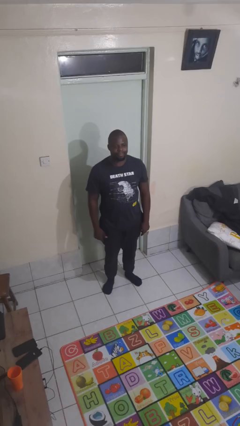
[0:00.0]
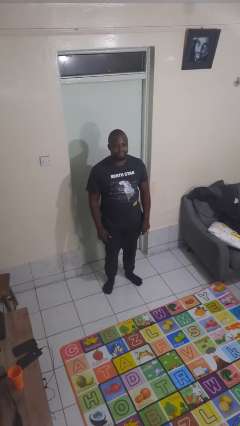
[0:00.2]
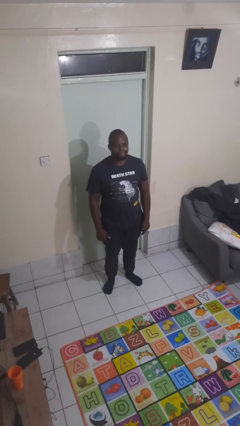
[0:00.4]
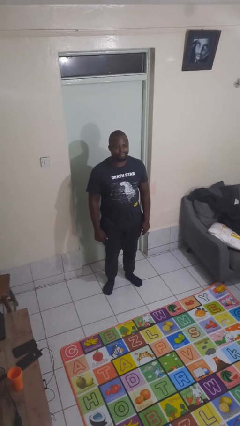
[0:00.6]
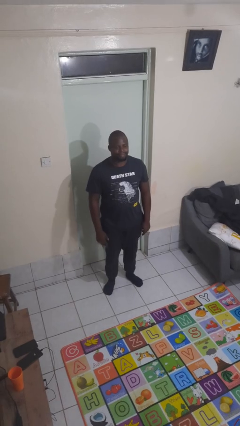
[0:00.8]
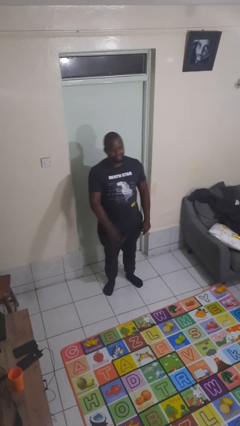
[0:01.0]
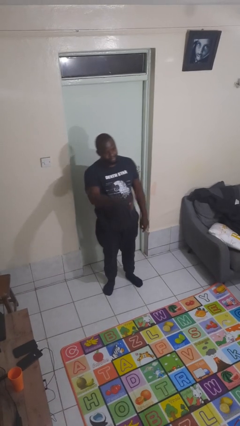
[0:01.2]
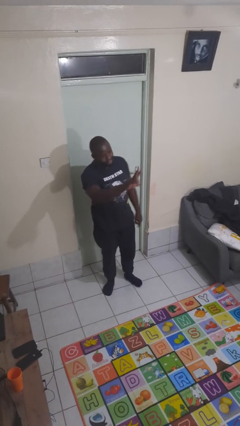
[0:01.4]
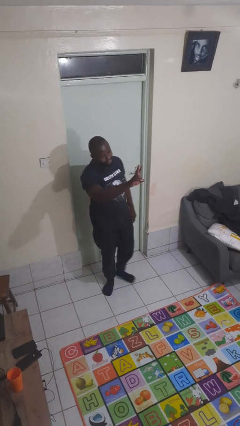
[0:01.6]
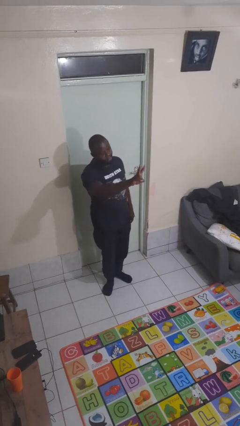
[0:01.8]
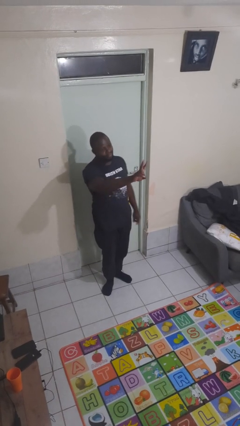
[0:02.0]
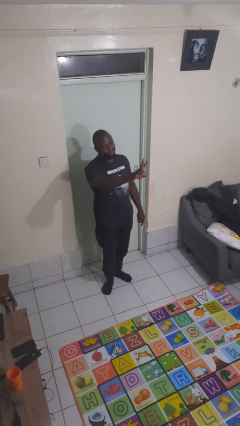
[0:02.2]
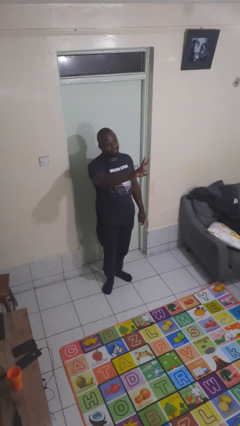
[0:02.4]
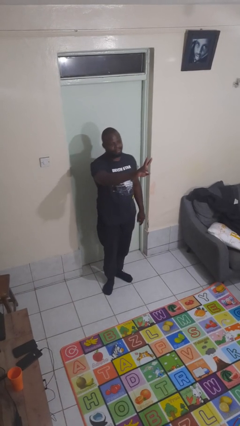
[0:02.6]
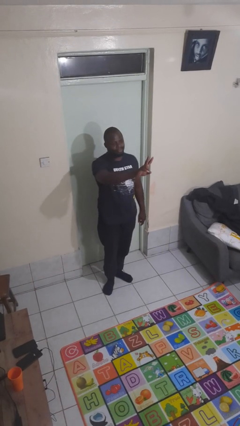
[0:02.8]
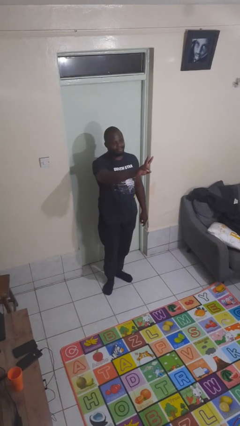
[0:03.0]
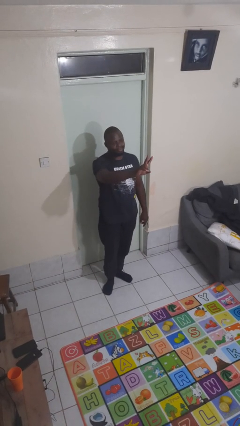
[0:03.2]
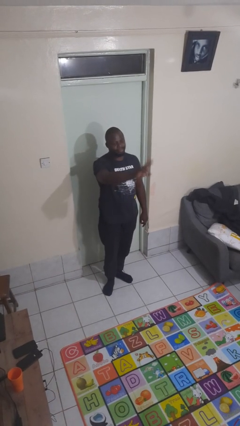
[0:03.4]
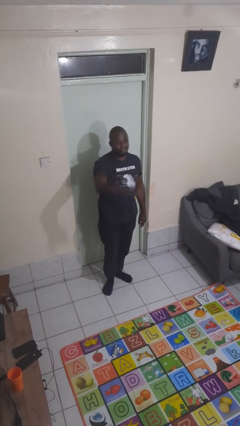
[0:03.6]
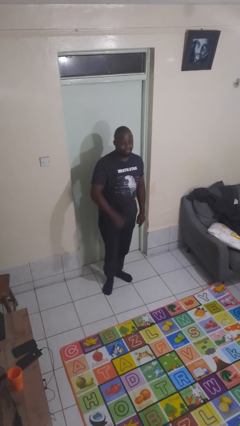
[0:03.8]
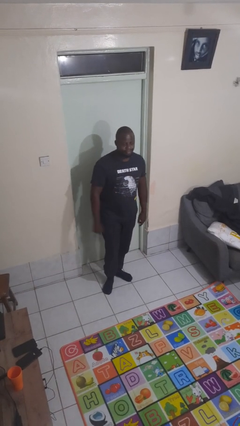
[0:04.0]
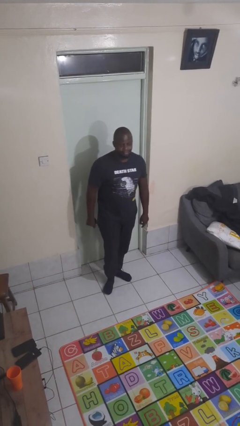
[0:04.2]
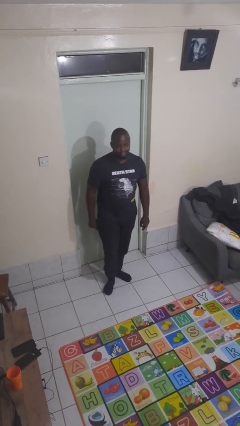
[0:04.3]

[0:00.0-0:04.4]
person gestures peace

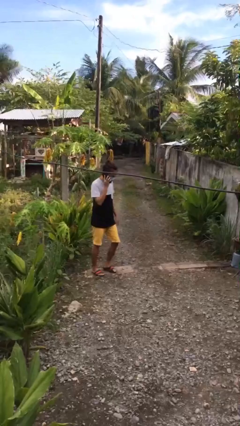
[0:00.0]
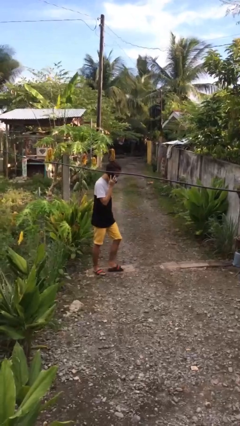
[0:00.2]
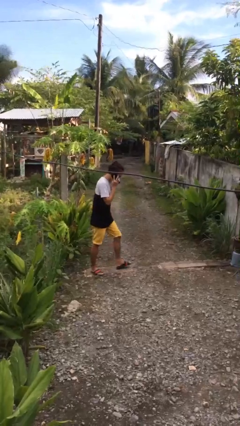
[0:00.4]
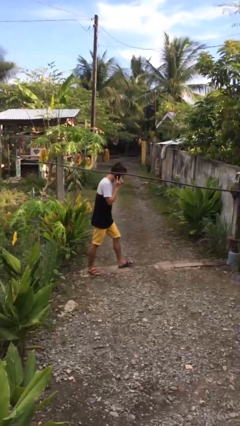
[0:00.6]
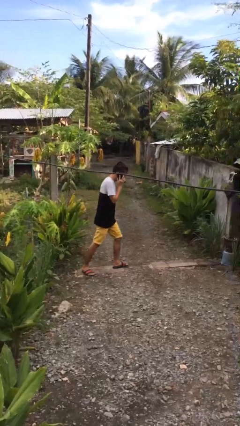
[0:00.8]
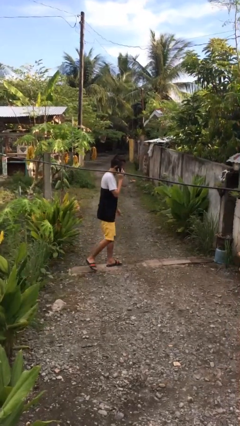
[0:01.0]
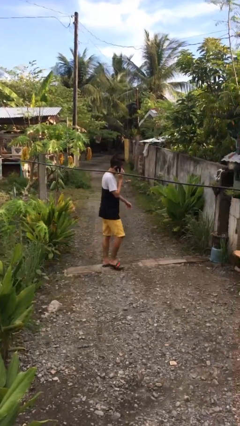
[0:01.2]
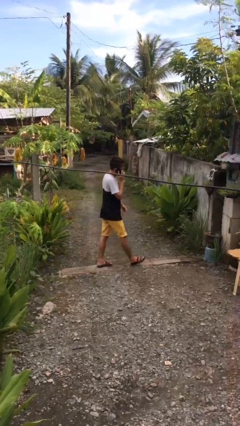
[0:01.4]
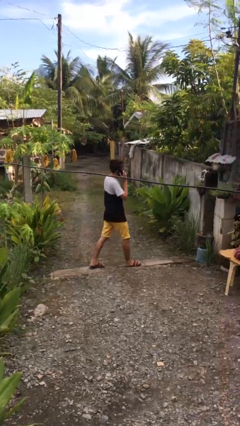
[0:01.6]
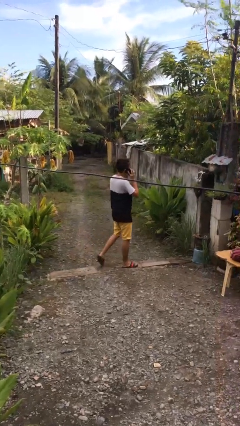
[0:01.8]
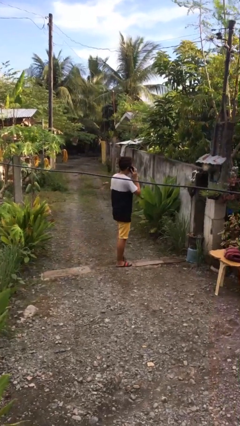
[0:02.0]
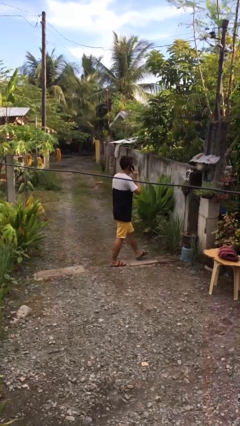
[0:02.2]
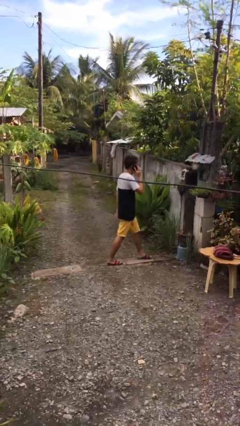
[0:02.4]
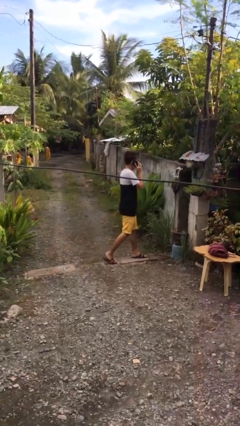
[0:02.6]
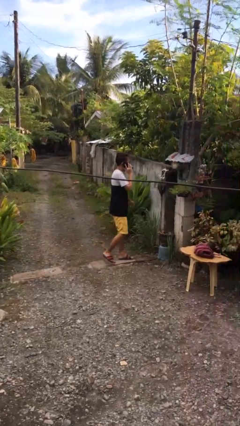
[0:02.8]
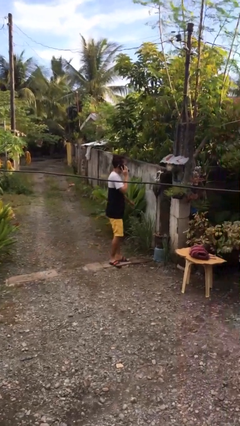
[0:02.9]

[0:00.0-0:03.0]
person talks on phone

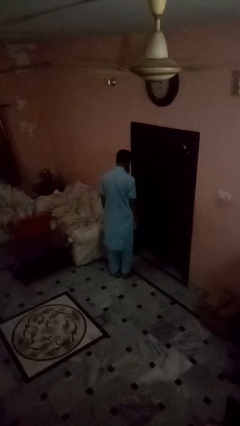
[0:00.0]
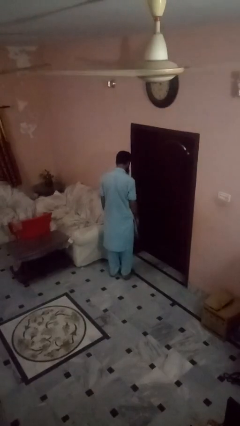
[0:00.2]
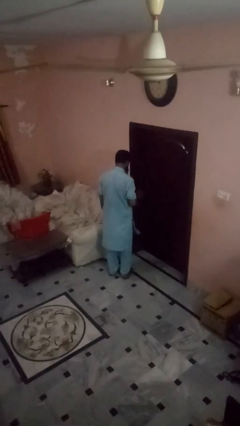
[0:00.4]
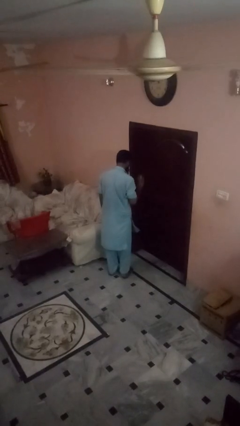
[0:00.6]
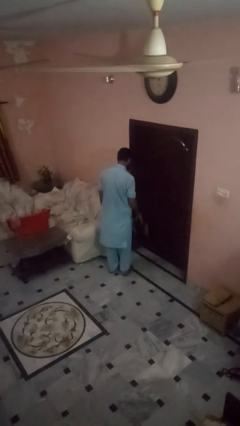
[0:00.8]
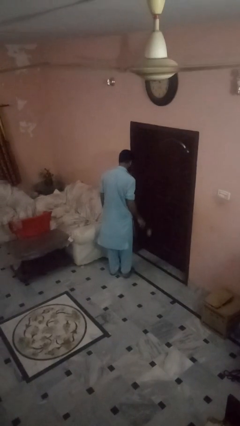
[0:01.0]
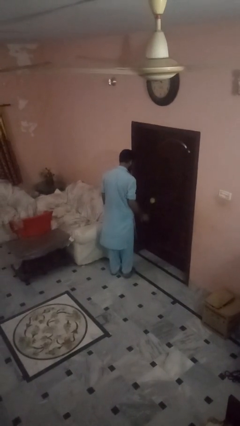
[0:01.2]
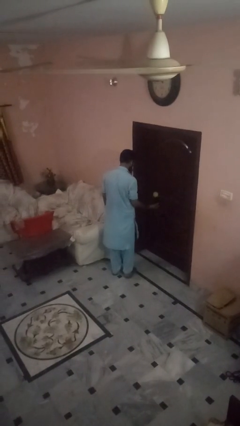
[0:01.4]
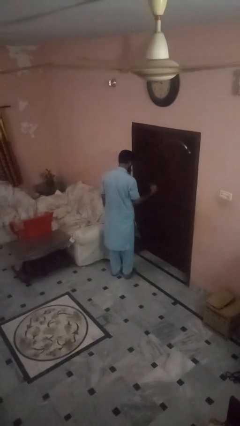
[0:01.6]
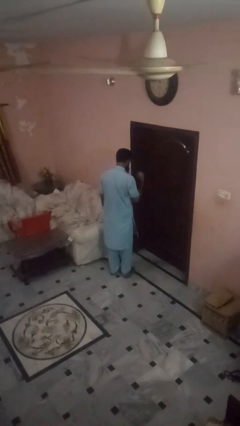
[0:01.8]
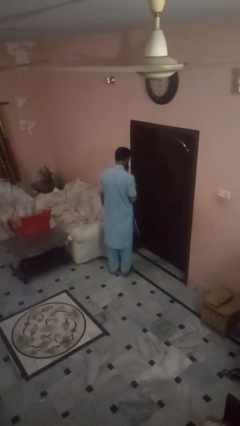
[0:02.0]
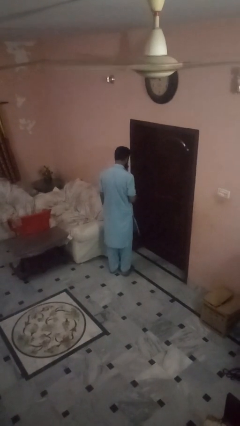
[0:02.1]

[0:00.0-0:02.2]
person bounces ball on floor

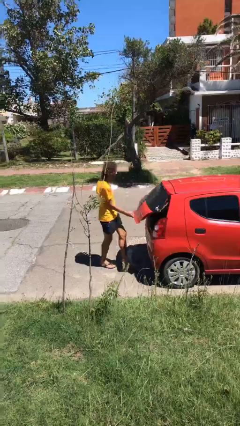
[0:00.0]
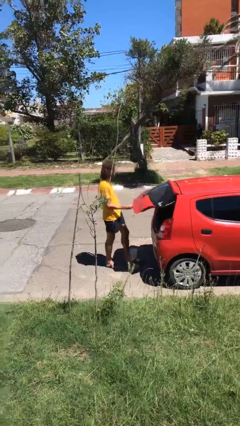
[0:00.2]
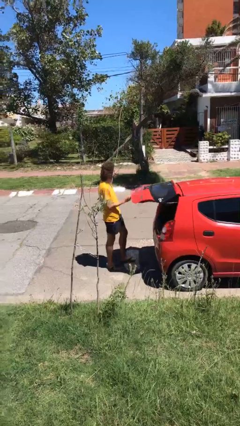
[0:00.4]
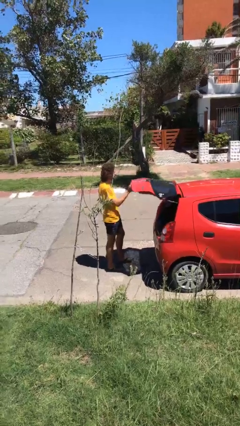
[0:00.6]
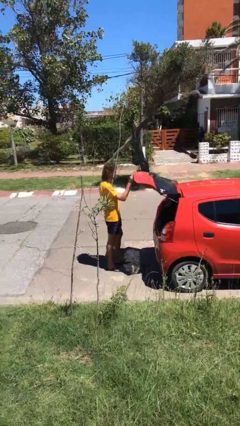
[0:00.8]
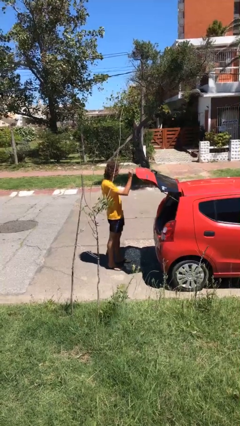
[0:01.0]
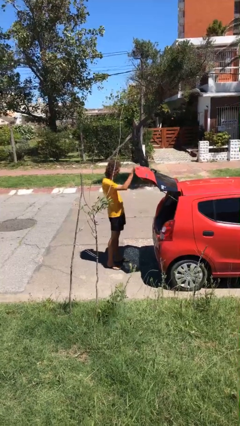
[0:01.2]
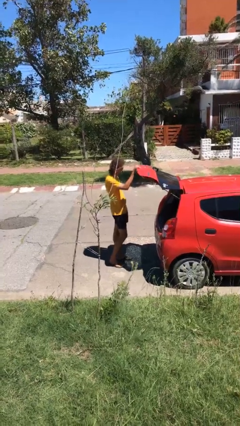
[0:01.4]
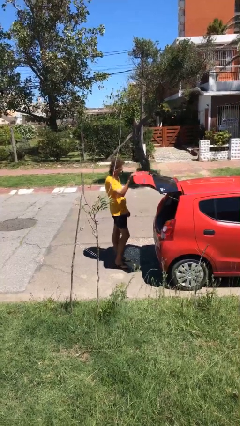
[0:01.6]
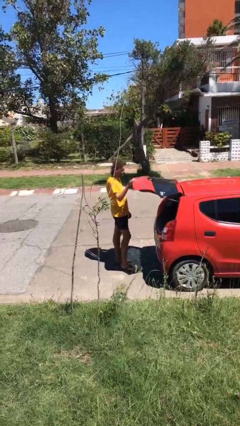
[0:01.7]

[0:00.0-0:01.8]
person opens car trunk

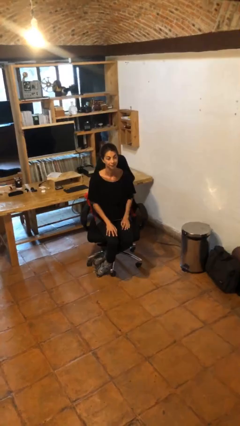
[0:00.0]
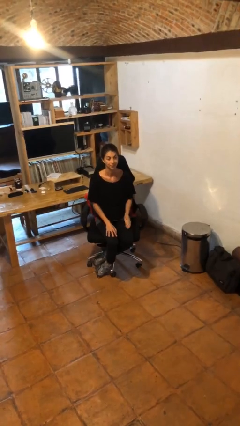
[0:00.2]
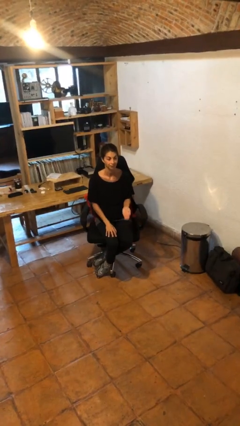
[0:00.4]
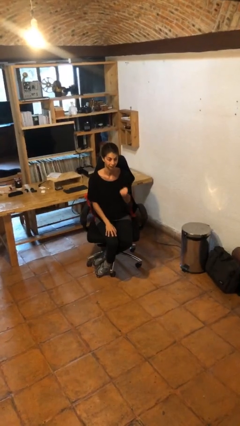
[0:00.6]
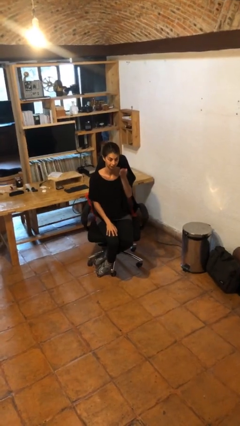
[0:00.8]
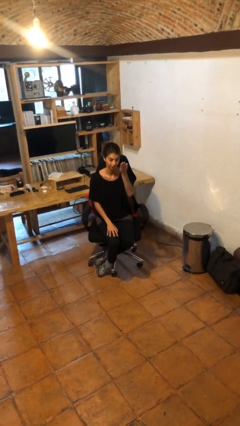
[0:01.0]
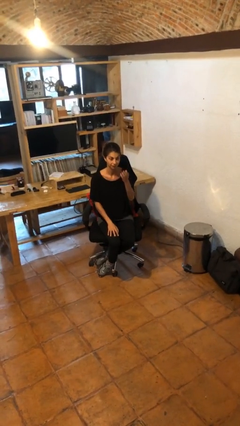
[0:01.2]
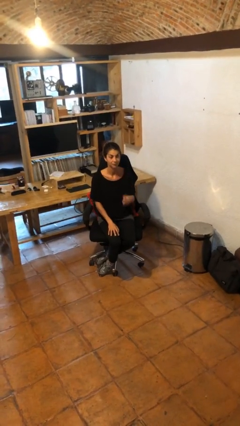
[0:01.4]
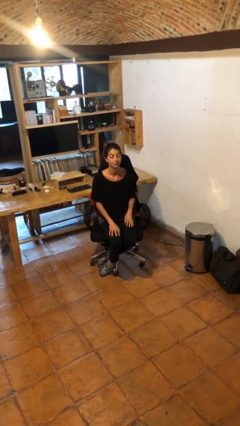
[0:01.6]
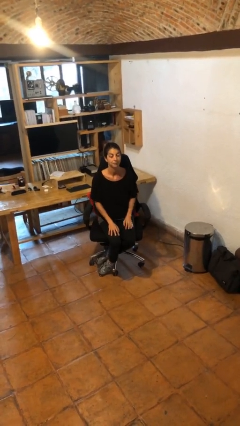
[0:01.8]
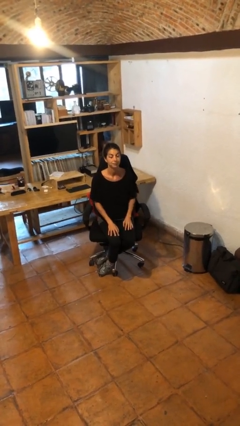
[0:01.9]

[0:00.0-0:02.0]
person gestures swipe up

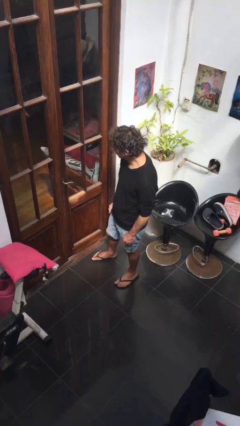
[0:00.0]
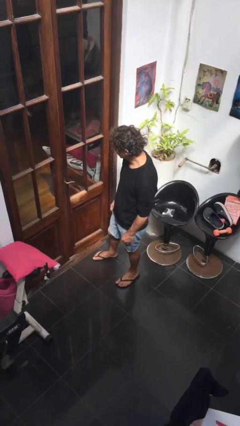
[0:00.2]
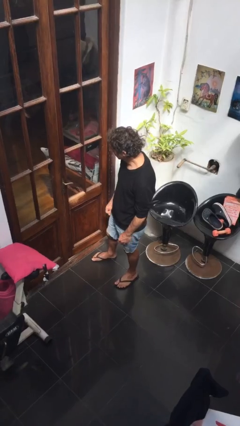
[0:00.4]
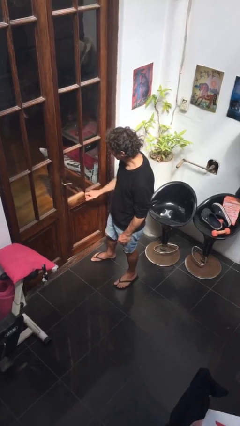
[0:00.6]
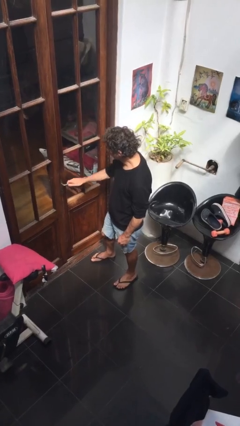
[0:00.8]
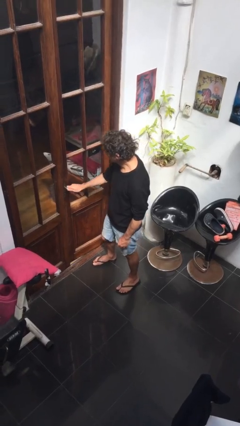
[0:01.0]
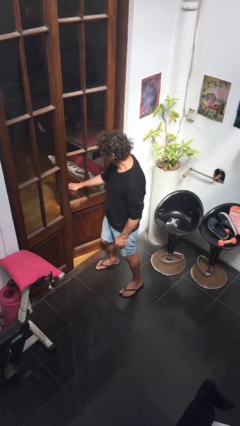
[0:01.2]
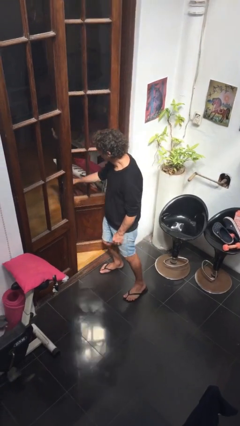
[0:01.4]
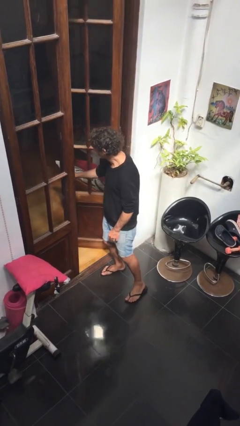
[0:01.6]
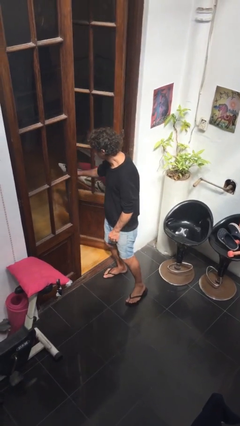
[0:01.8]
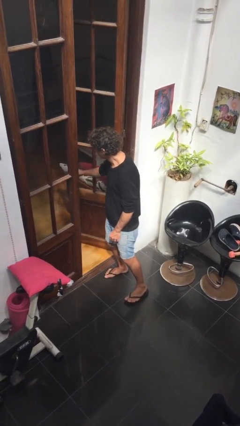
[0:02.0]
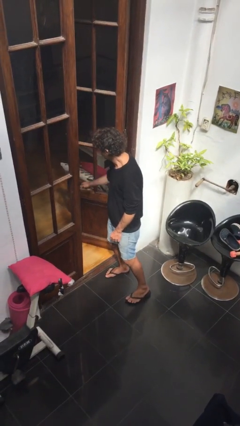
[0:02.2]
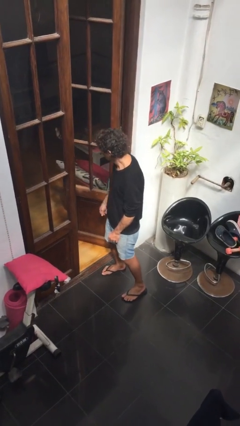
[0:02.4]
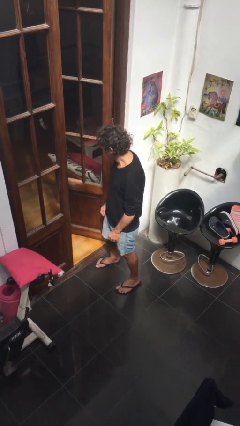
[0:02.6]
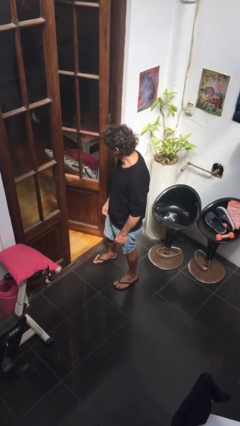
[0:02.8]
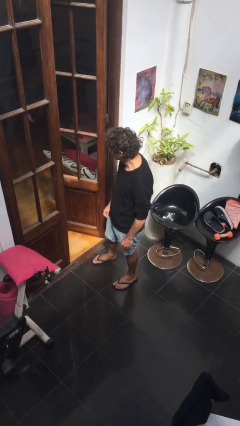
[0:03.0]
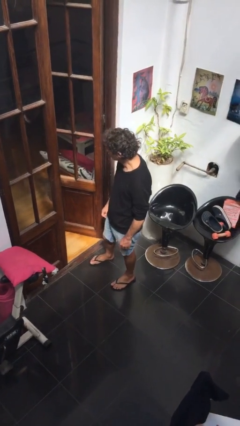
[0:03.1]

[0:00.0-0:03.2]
person opens facility door

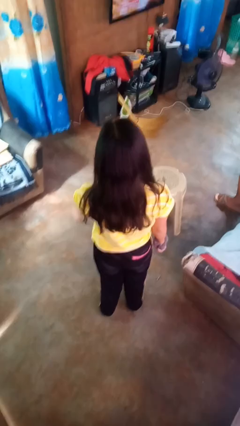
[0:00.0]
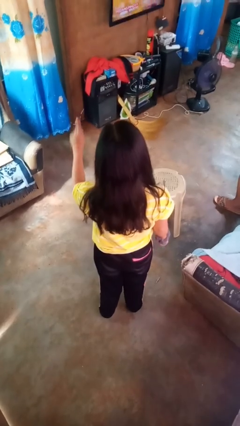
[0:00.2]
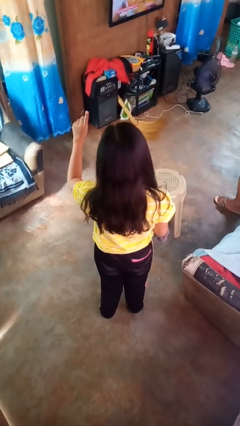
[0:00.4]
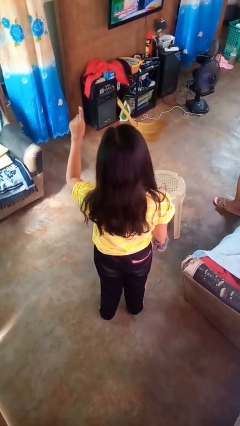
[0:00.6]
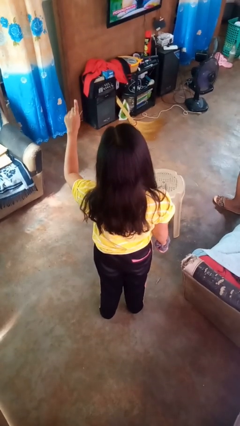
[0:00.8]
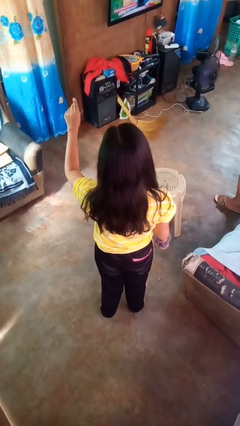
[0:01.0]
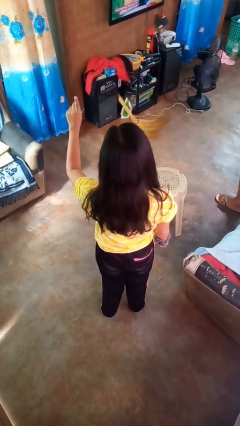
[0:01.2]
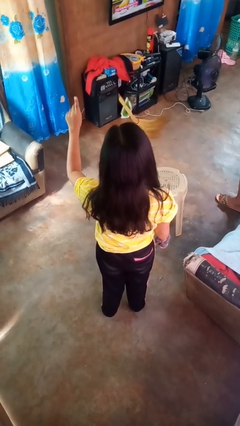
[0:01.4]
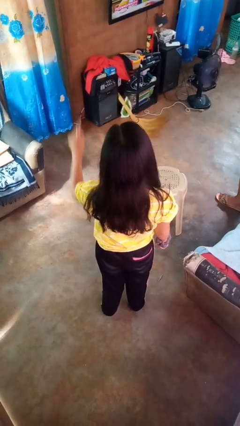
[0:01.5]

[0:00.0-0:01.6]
person gestures number one
